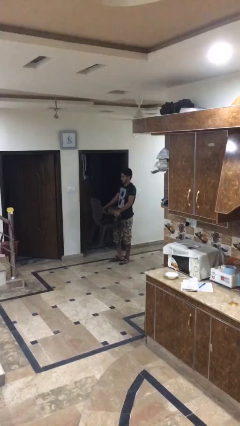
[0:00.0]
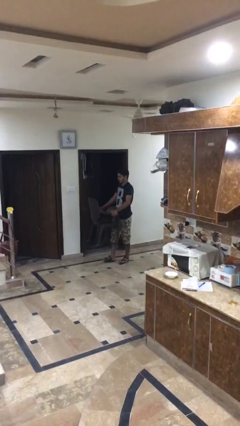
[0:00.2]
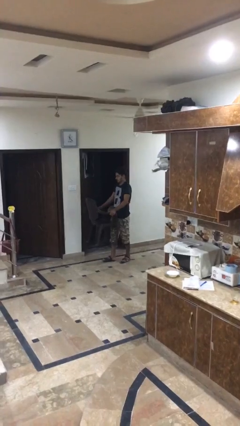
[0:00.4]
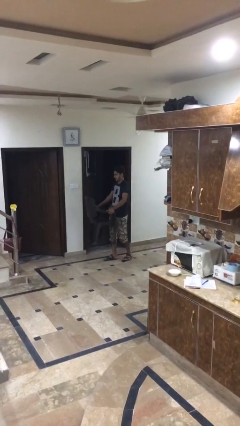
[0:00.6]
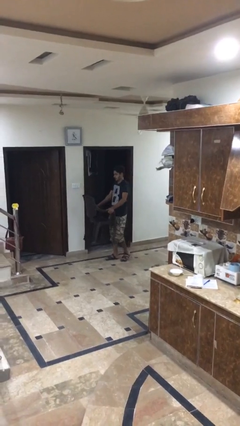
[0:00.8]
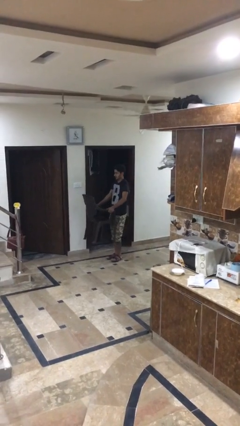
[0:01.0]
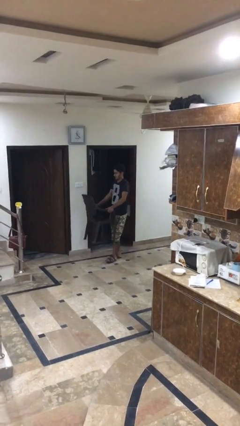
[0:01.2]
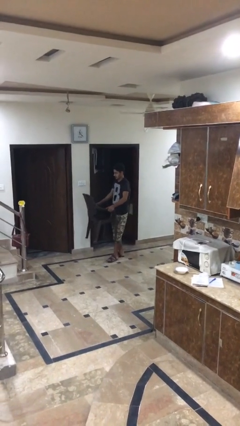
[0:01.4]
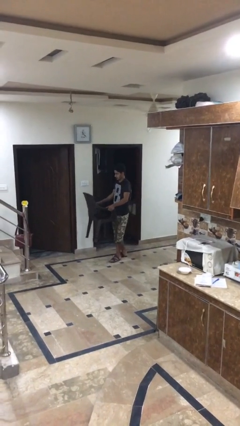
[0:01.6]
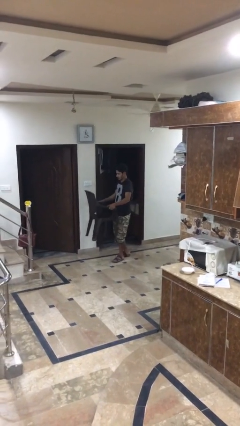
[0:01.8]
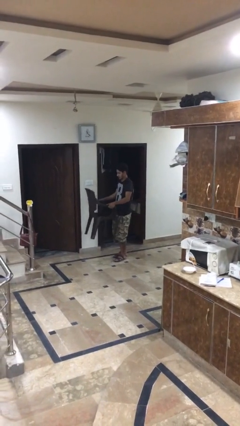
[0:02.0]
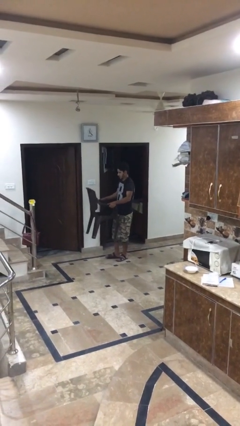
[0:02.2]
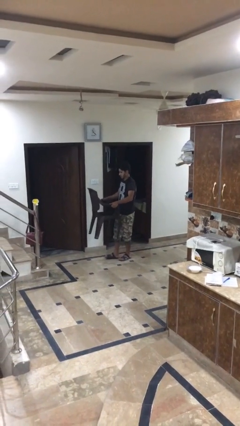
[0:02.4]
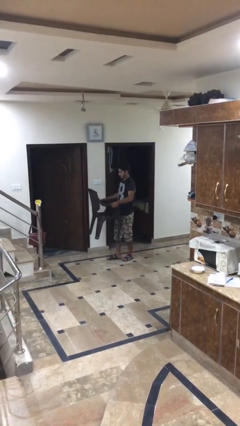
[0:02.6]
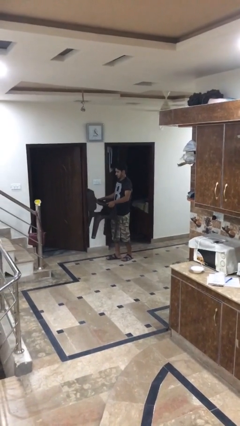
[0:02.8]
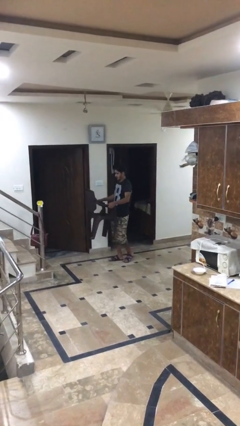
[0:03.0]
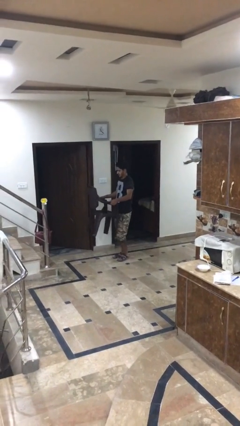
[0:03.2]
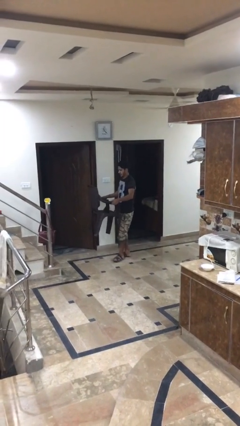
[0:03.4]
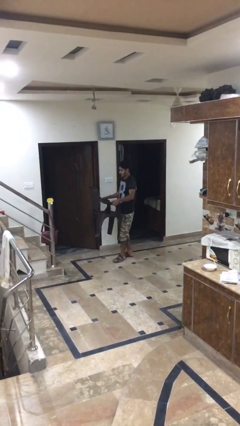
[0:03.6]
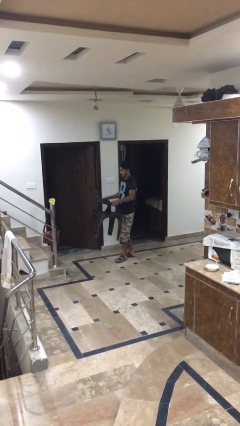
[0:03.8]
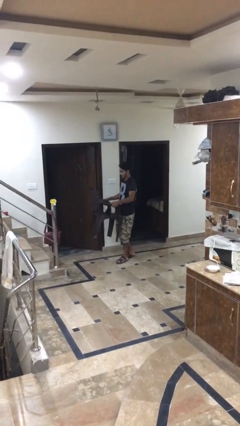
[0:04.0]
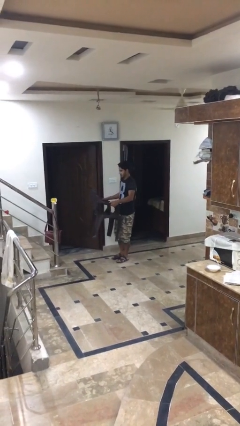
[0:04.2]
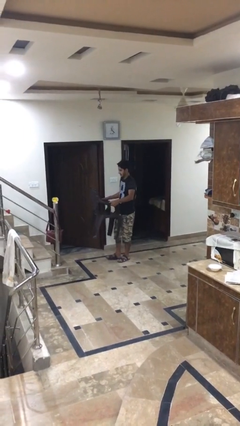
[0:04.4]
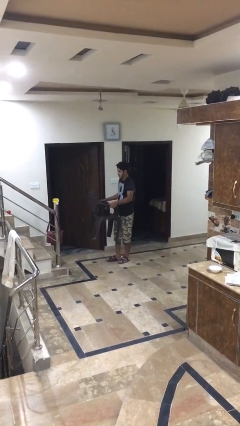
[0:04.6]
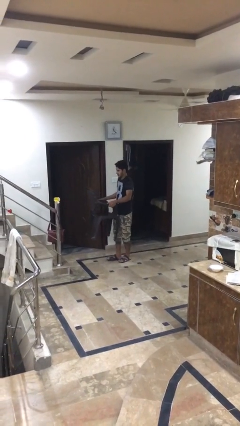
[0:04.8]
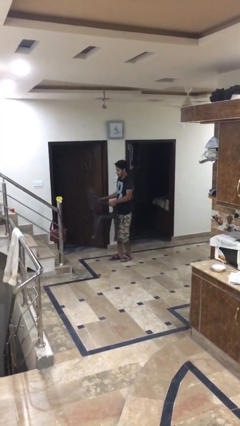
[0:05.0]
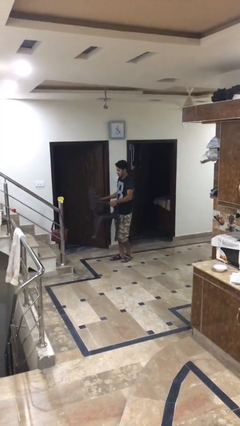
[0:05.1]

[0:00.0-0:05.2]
person carries heavy object

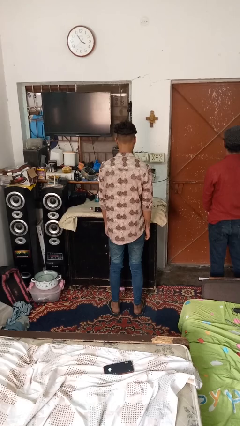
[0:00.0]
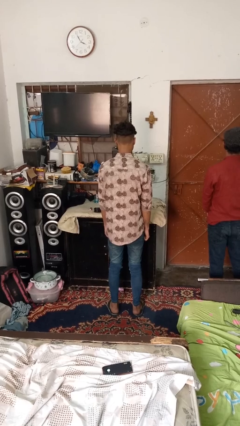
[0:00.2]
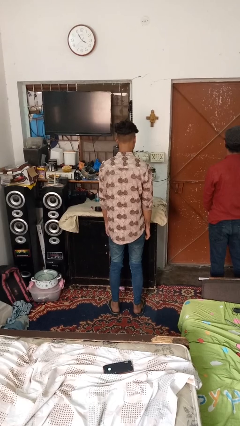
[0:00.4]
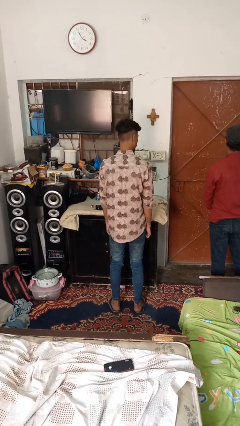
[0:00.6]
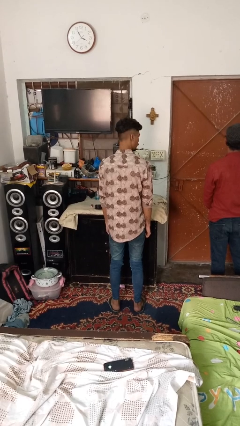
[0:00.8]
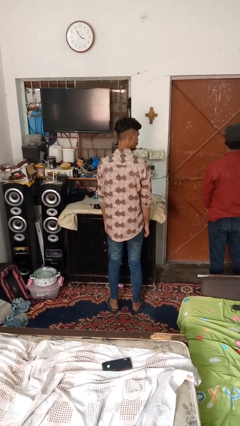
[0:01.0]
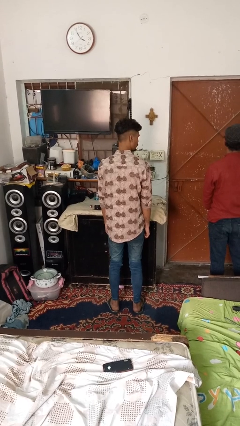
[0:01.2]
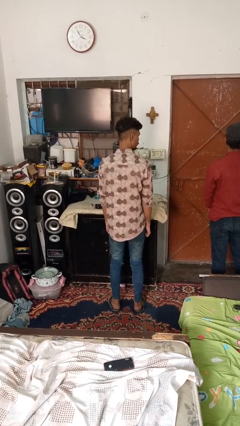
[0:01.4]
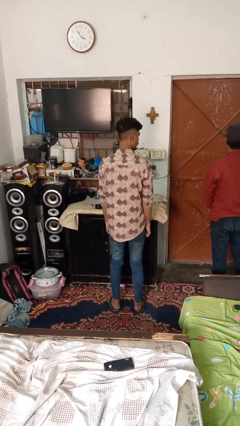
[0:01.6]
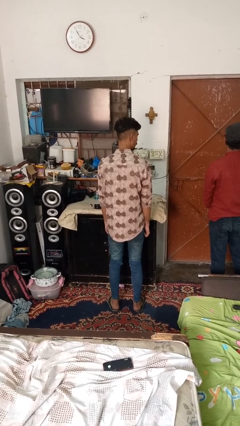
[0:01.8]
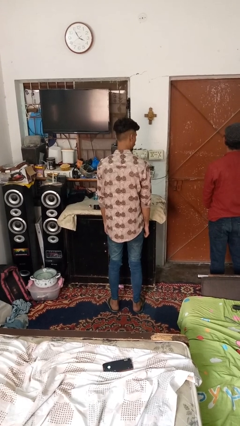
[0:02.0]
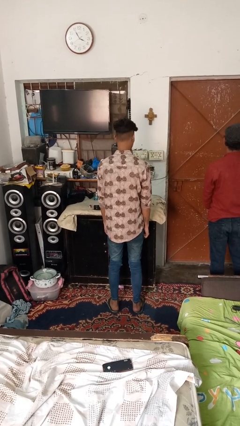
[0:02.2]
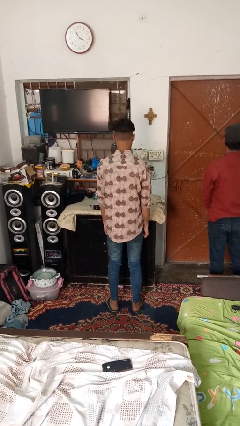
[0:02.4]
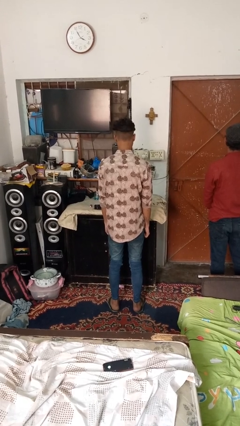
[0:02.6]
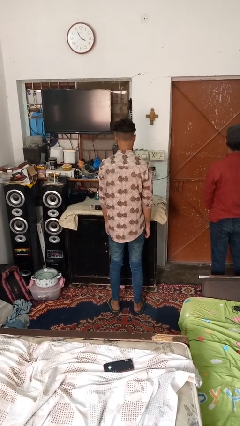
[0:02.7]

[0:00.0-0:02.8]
person looks over shoulder

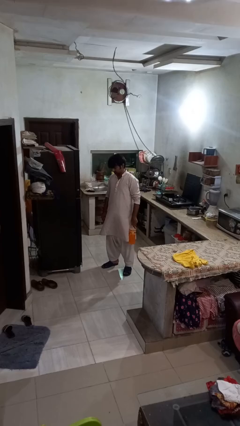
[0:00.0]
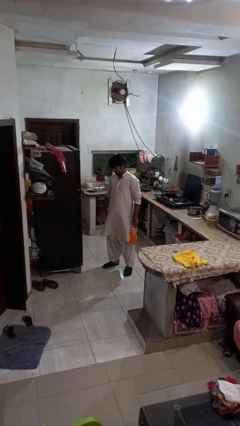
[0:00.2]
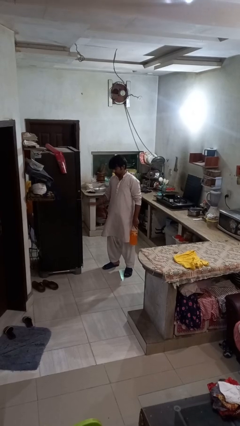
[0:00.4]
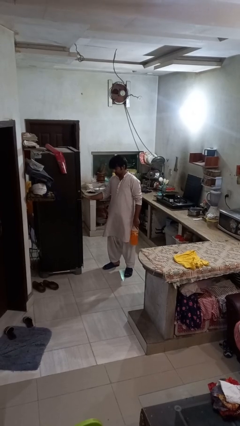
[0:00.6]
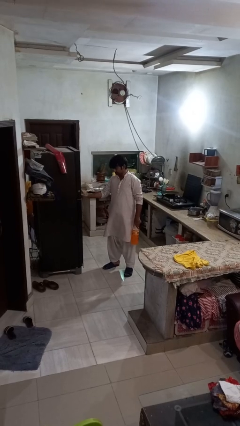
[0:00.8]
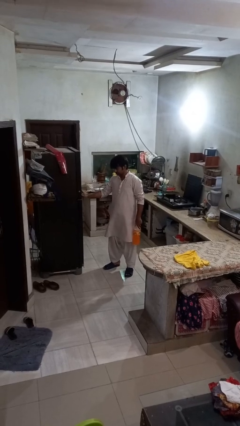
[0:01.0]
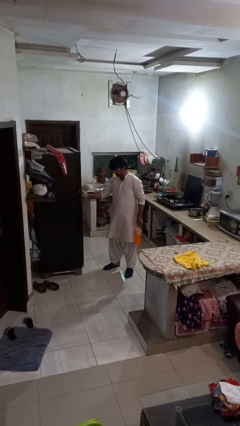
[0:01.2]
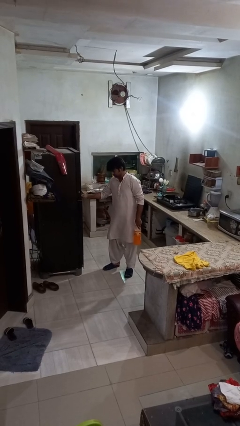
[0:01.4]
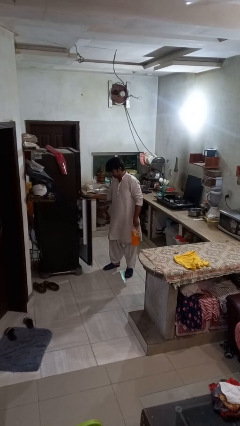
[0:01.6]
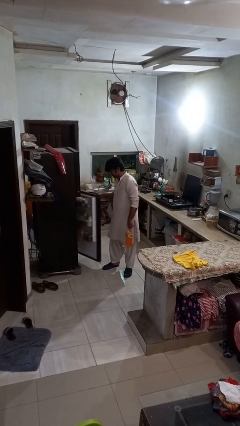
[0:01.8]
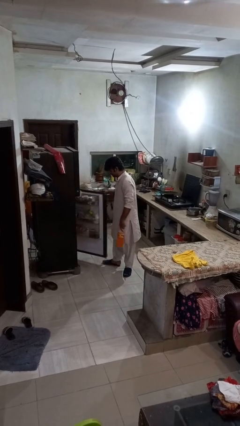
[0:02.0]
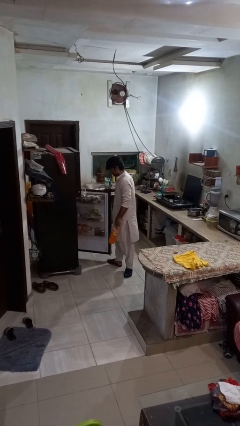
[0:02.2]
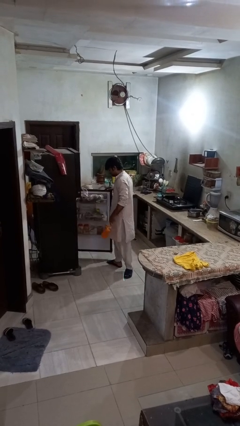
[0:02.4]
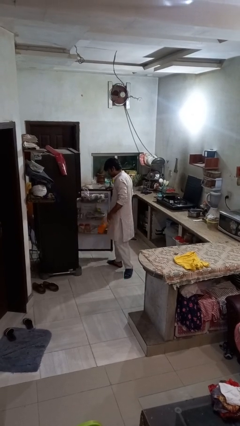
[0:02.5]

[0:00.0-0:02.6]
person opens refrigerator

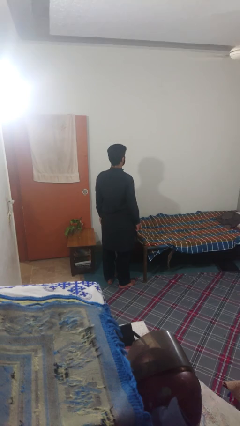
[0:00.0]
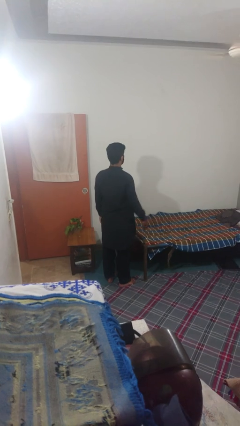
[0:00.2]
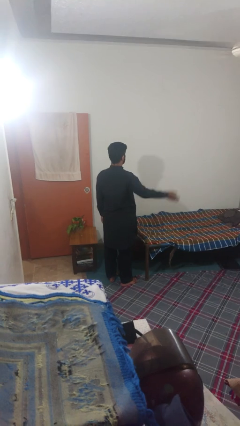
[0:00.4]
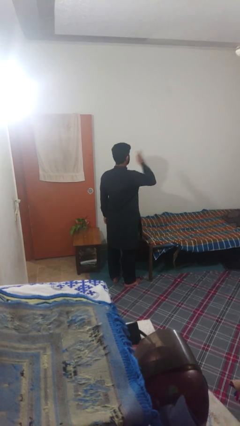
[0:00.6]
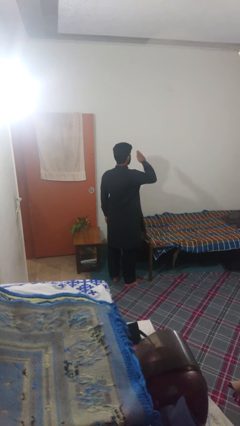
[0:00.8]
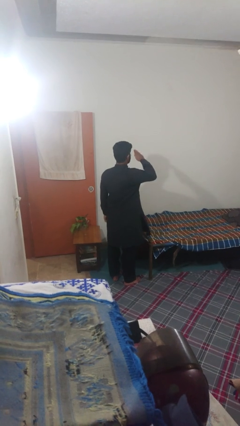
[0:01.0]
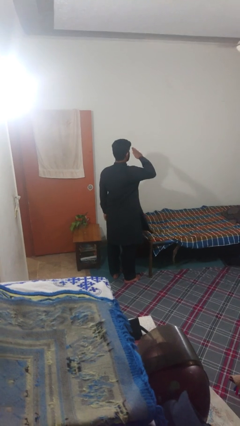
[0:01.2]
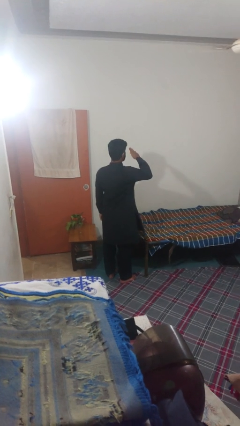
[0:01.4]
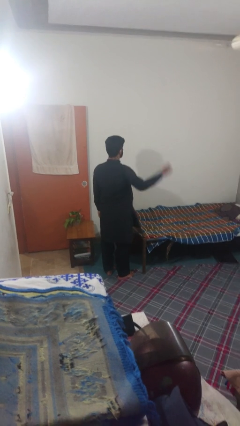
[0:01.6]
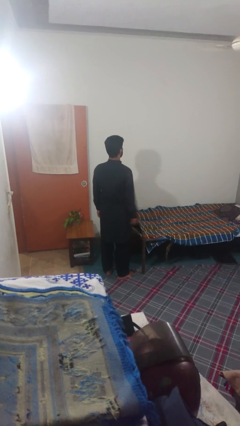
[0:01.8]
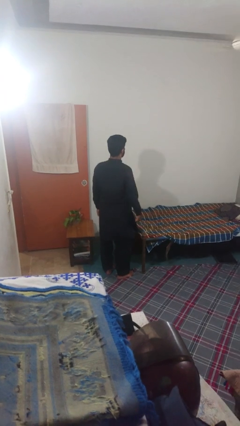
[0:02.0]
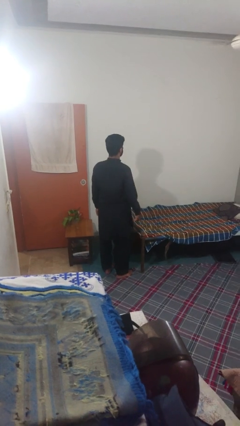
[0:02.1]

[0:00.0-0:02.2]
person salutes

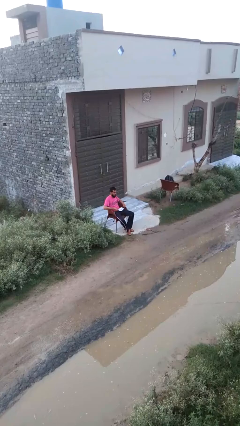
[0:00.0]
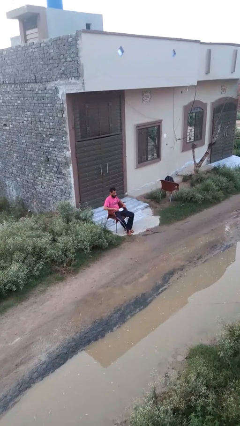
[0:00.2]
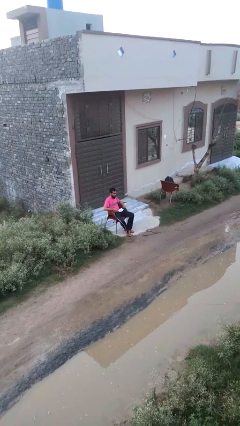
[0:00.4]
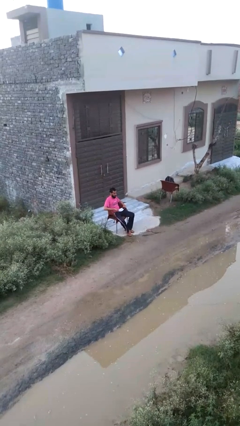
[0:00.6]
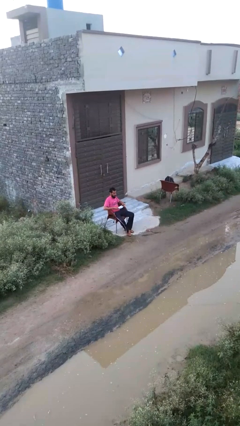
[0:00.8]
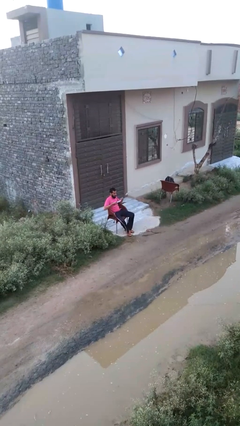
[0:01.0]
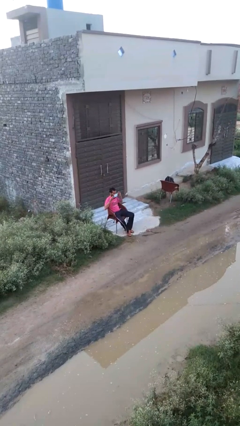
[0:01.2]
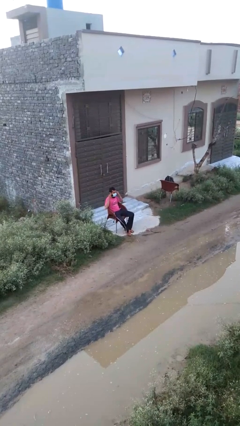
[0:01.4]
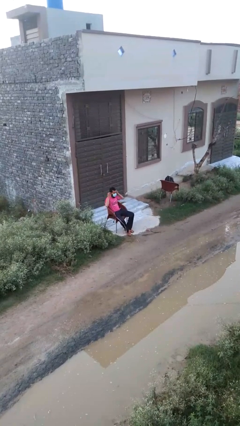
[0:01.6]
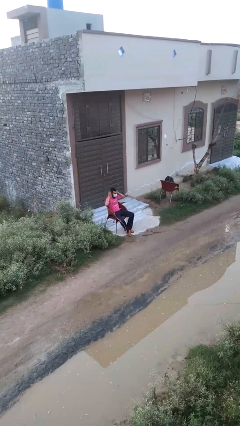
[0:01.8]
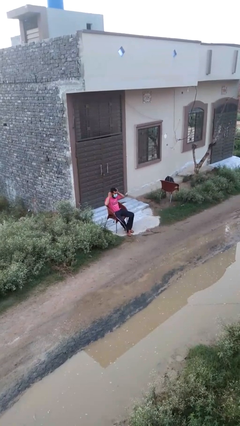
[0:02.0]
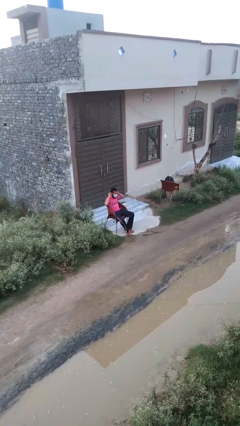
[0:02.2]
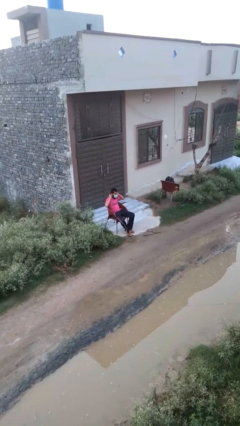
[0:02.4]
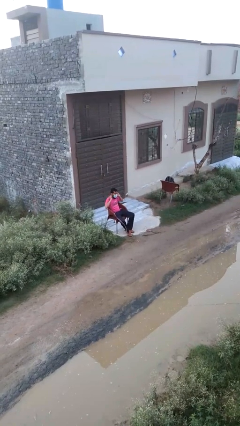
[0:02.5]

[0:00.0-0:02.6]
person puts on facemask

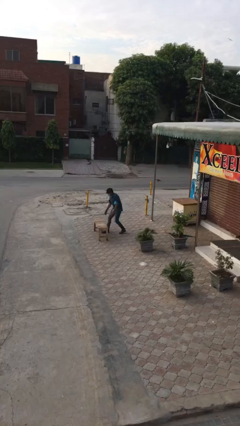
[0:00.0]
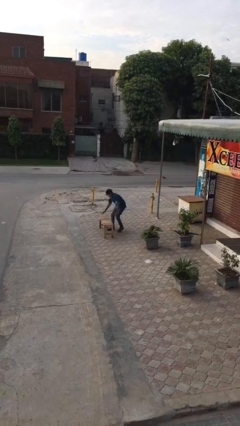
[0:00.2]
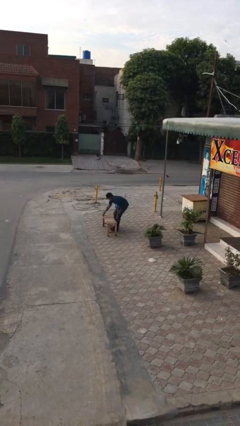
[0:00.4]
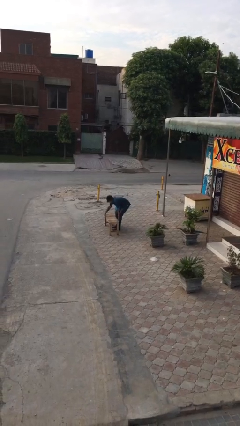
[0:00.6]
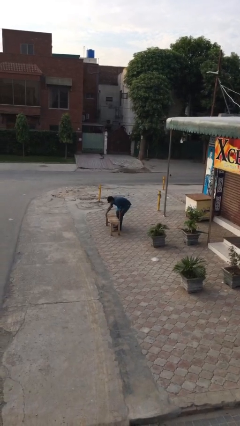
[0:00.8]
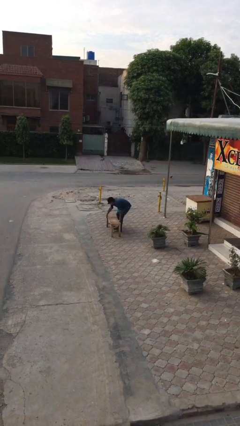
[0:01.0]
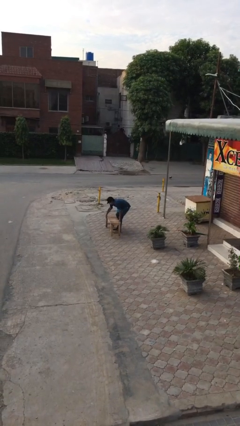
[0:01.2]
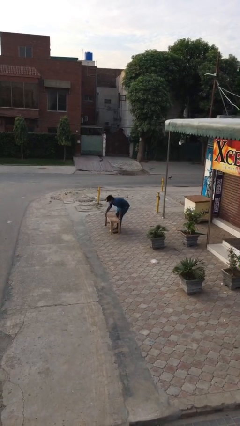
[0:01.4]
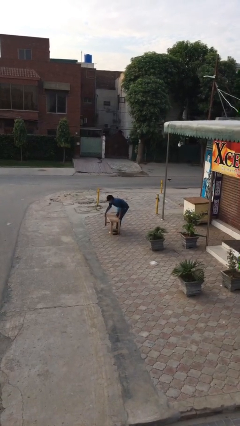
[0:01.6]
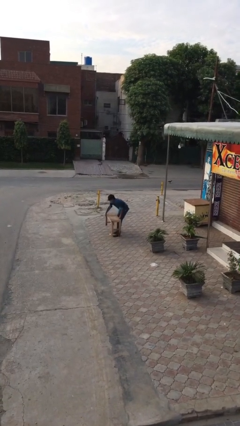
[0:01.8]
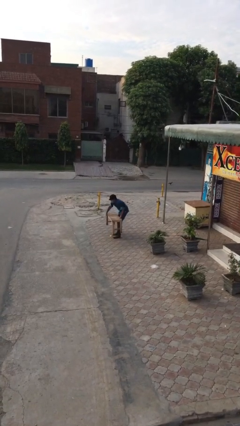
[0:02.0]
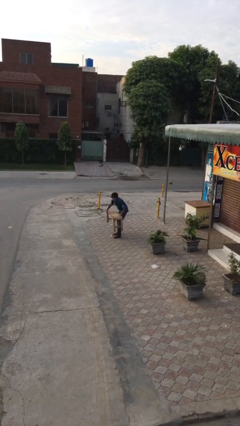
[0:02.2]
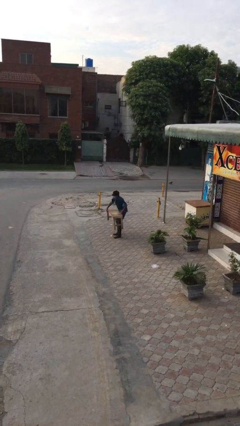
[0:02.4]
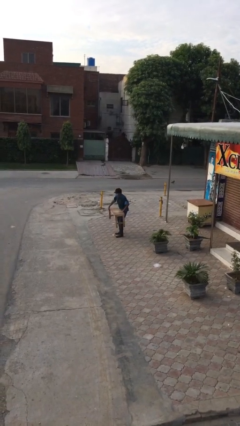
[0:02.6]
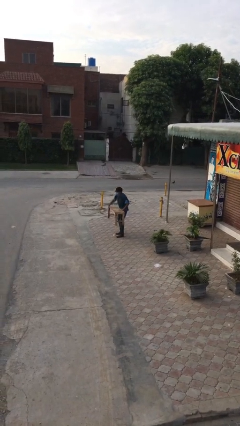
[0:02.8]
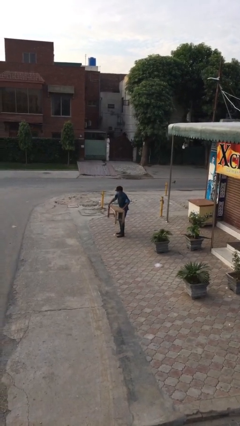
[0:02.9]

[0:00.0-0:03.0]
person picks up object from floor
